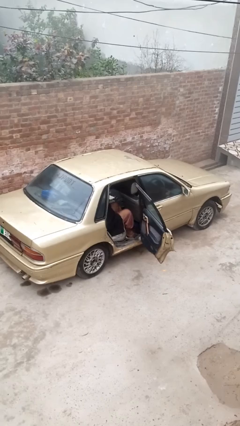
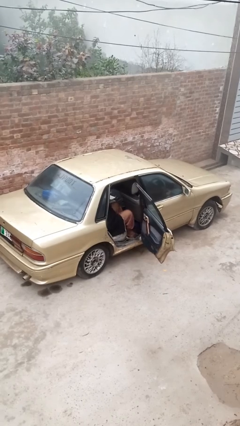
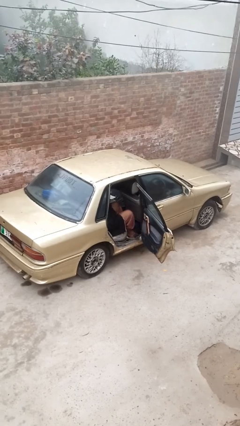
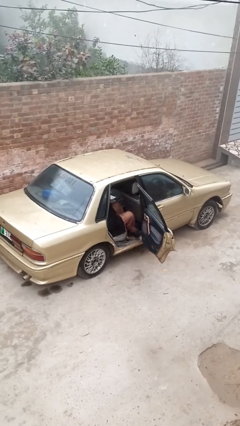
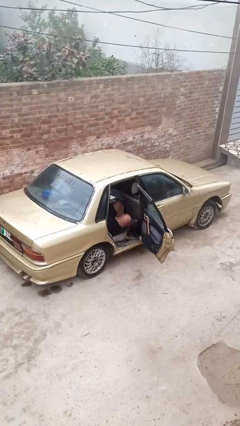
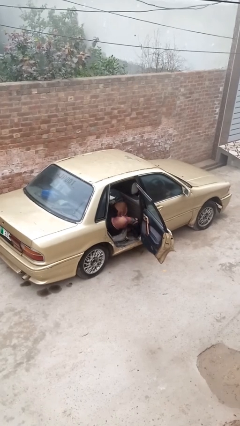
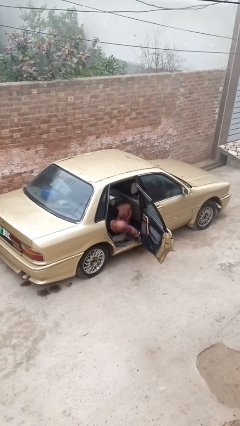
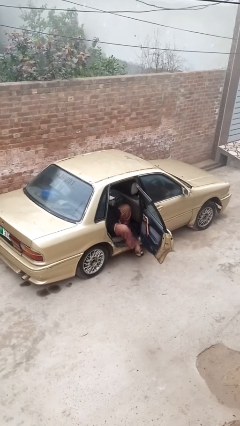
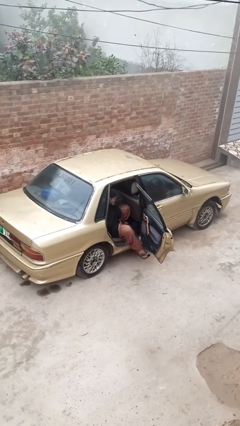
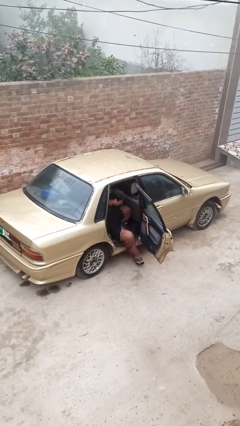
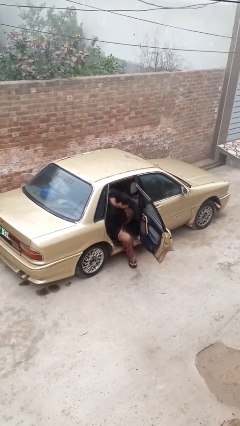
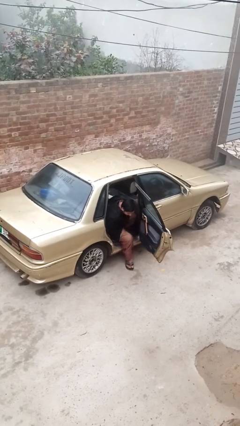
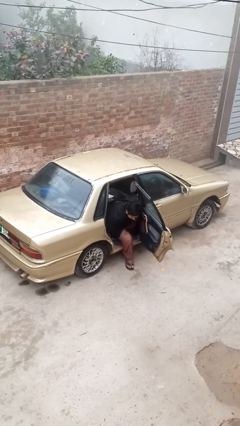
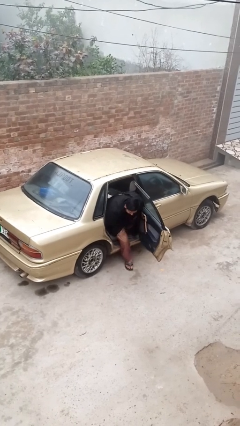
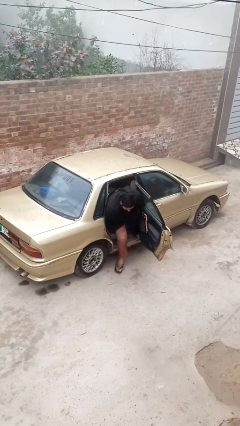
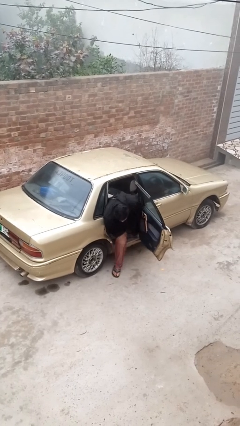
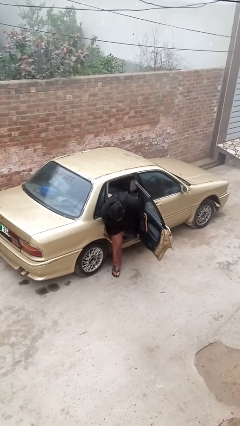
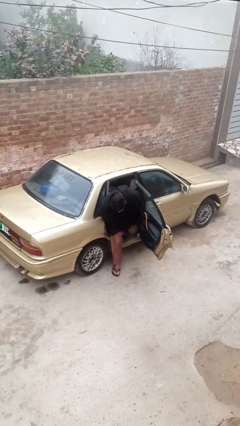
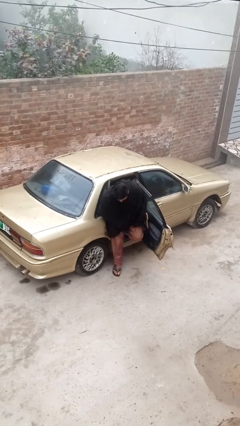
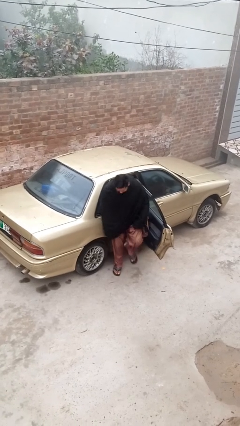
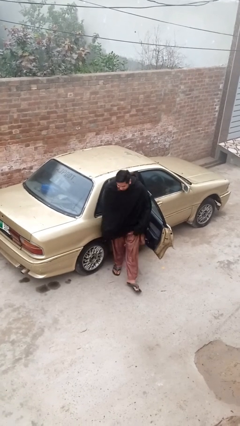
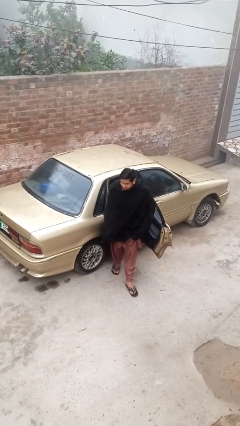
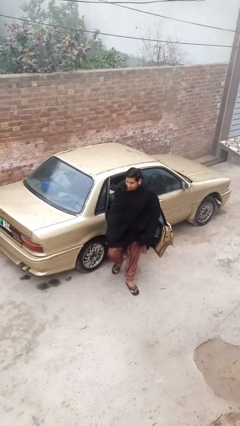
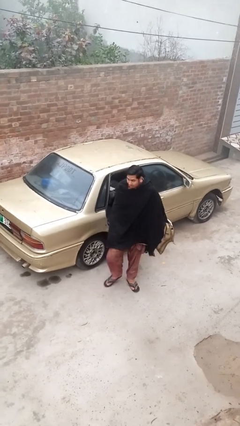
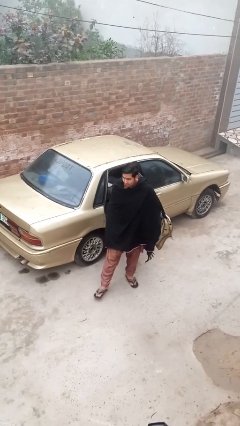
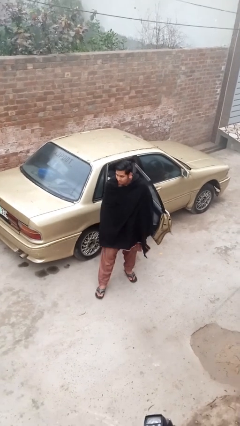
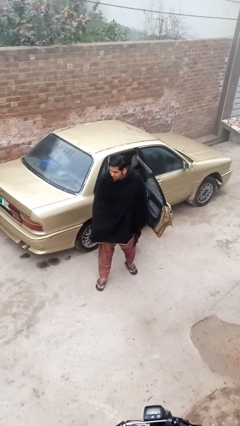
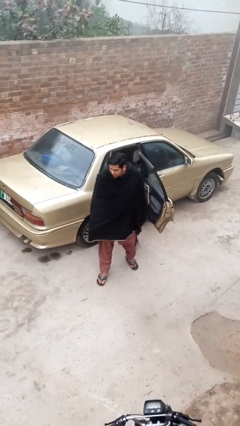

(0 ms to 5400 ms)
person exits car

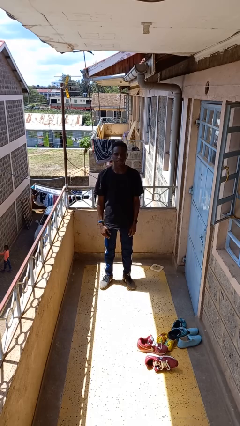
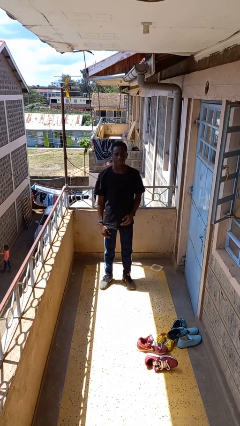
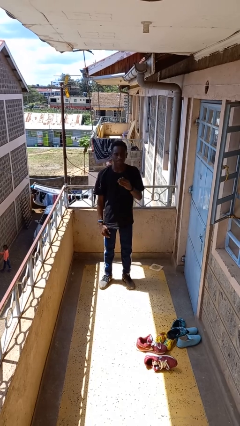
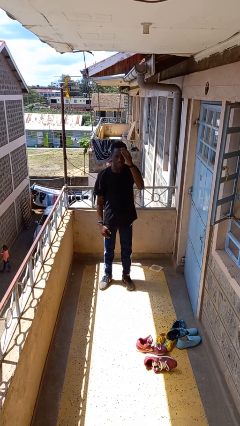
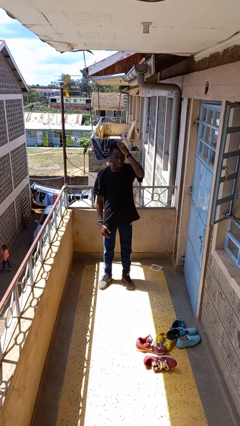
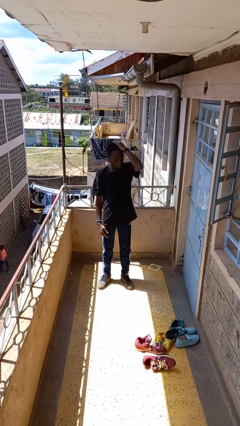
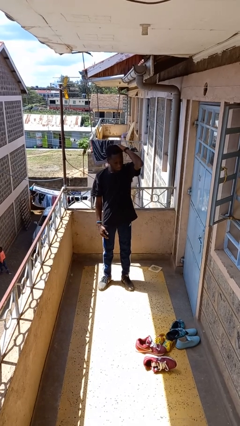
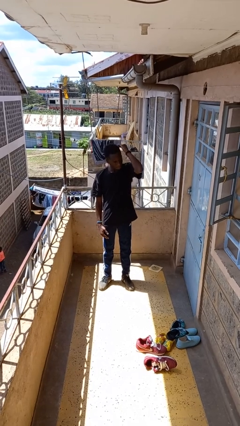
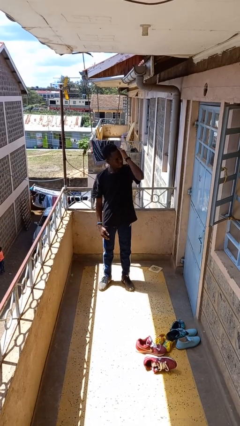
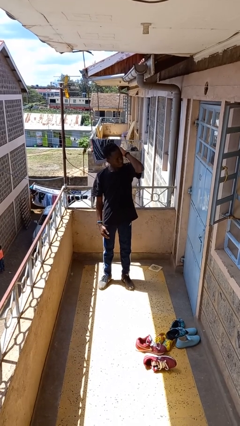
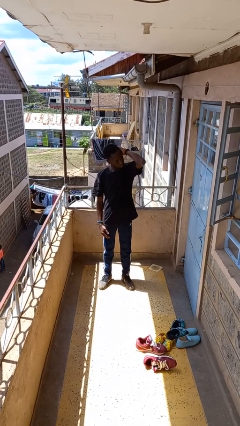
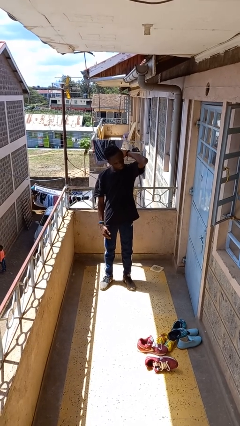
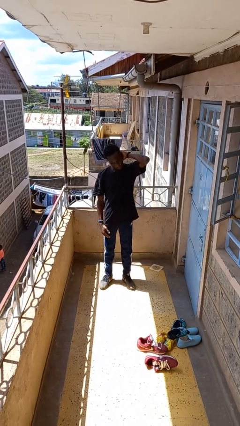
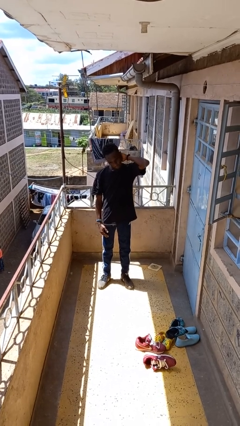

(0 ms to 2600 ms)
person strokes hair

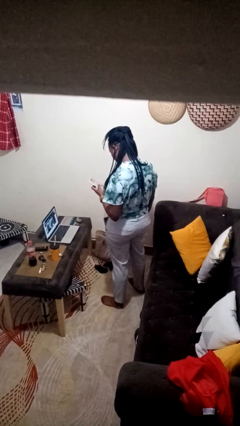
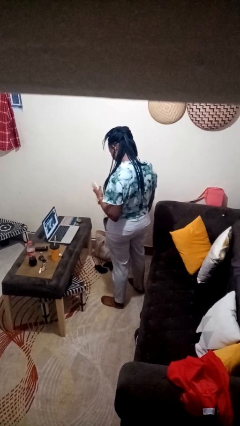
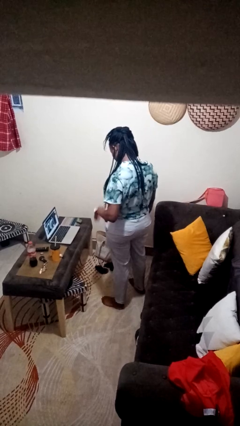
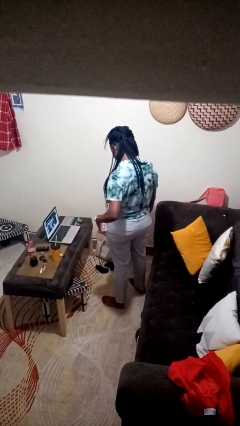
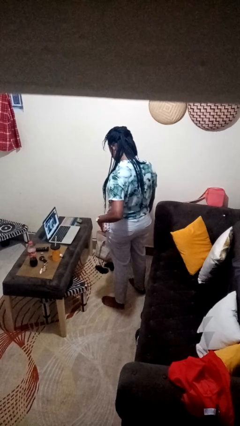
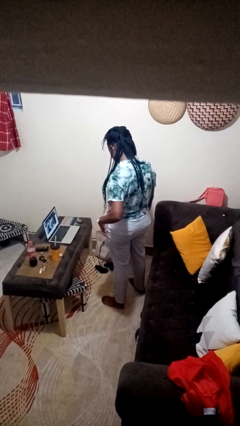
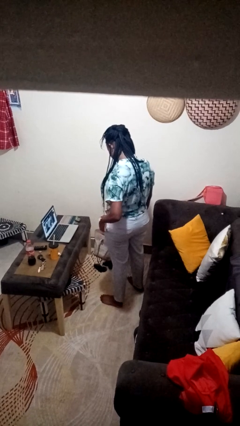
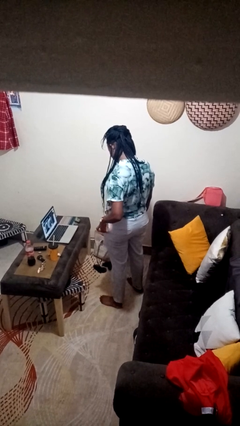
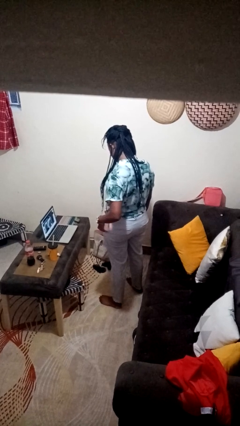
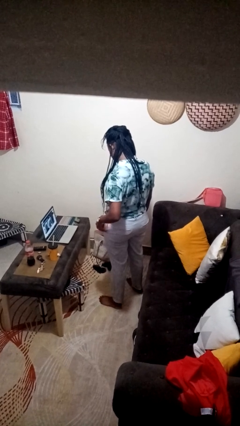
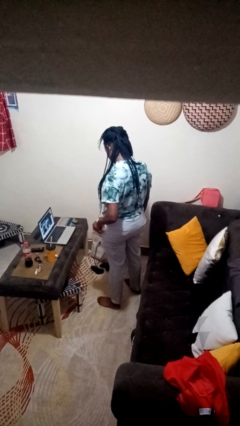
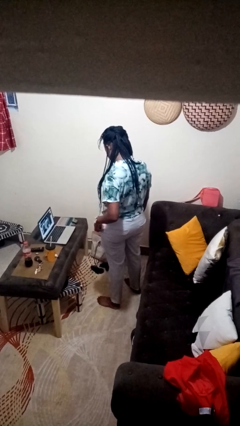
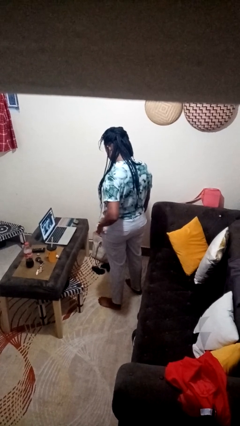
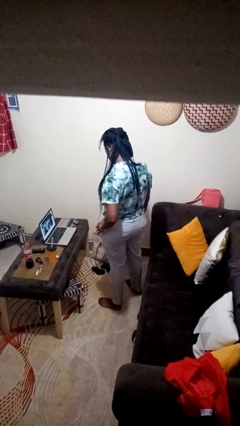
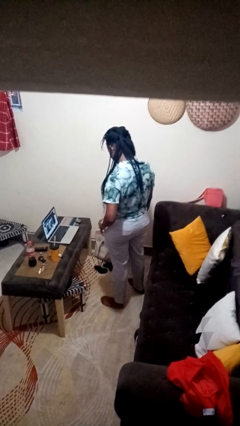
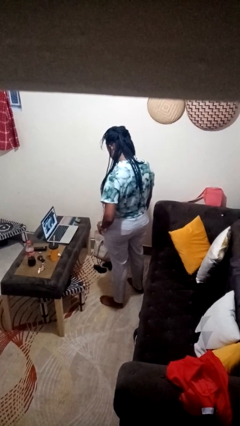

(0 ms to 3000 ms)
person puts phone into pocket

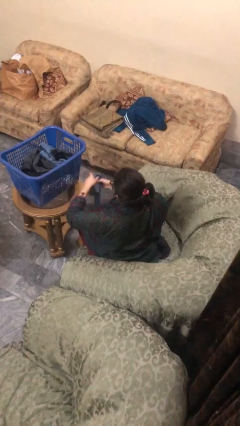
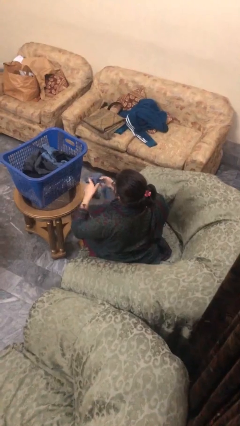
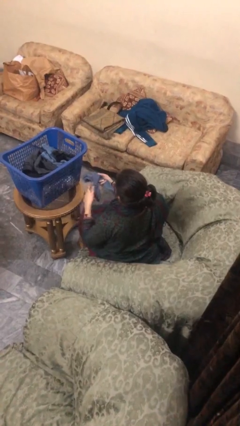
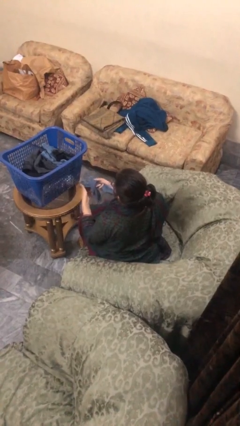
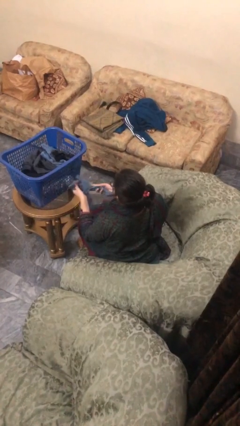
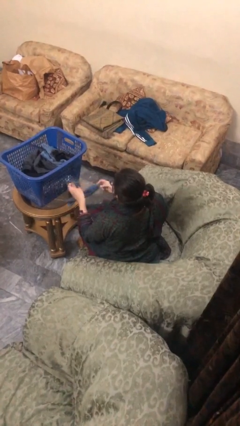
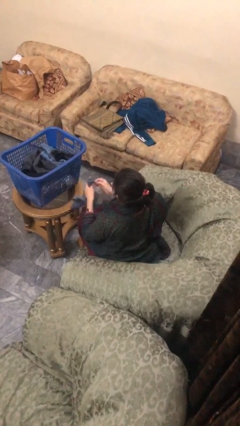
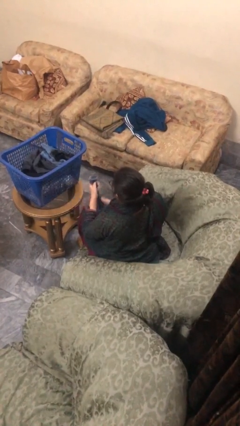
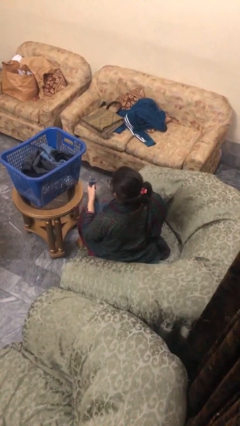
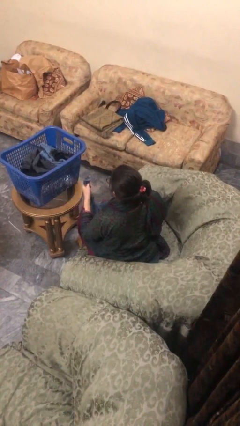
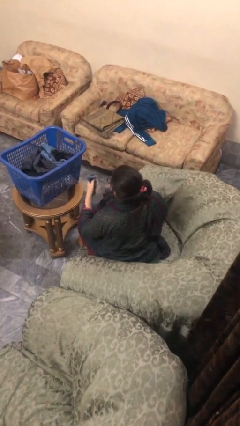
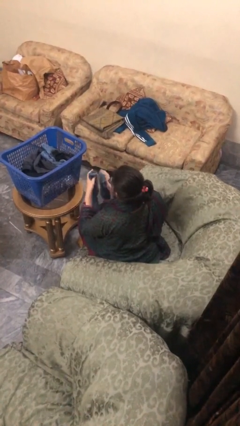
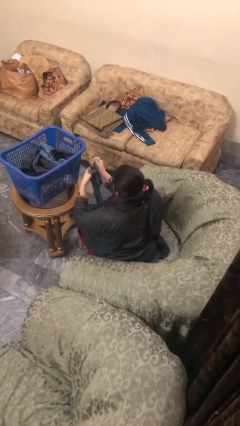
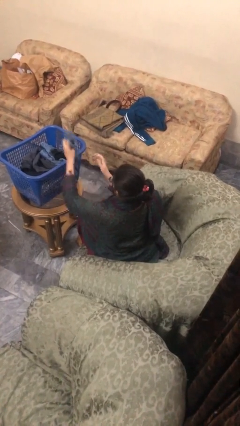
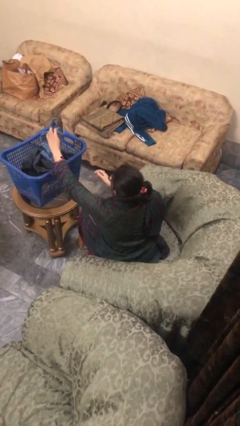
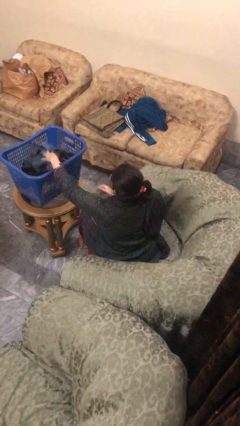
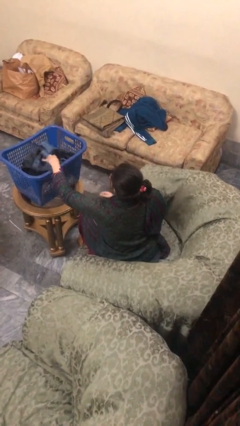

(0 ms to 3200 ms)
person folds socks

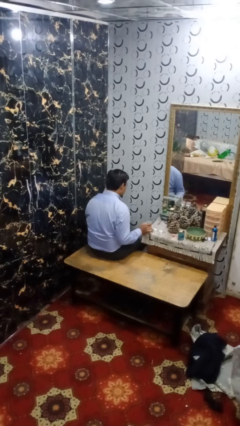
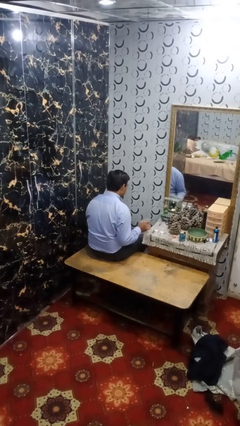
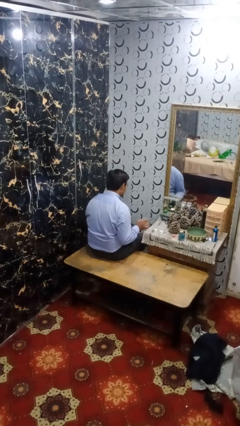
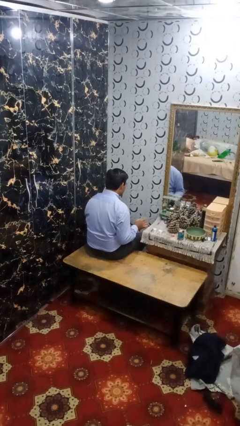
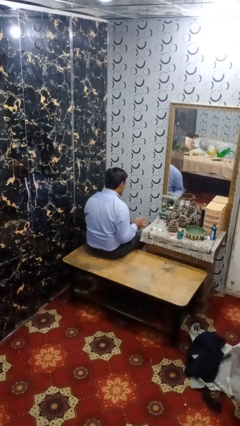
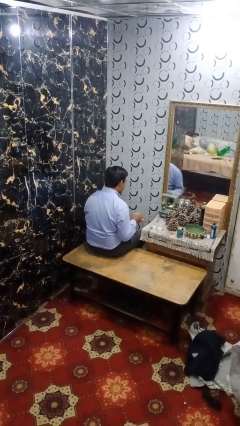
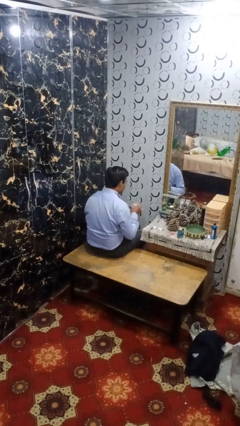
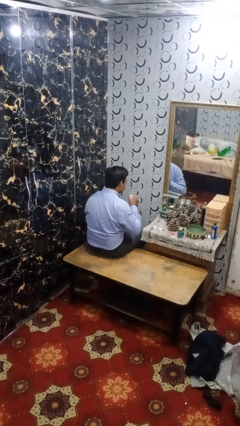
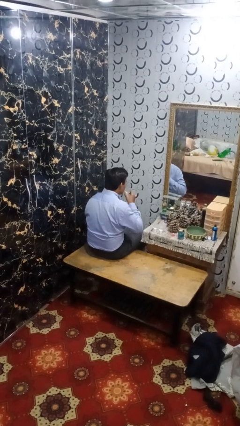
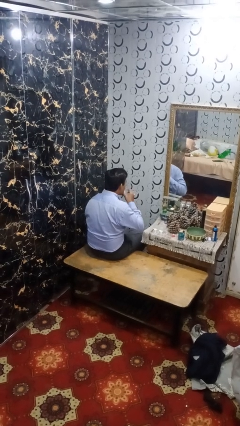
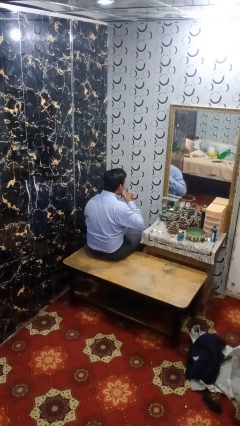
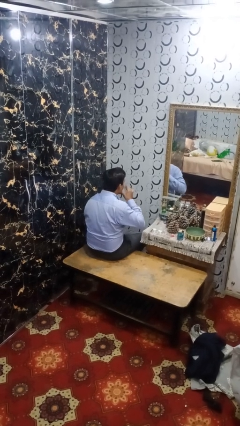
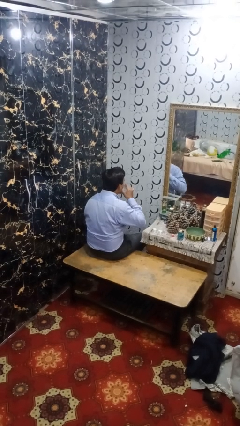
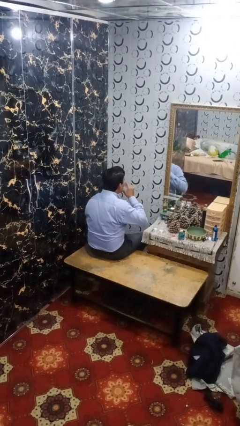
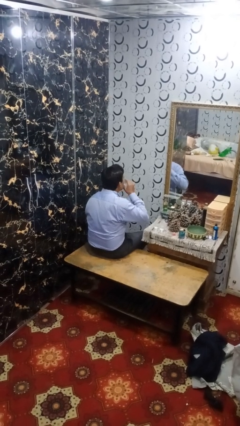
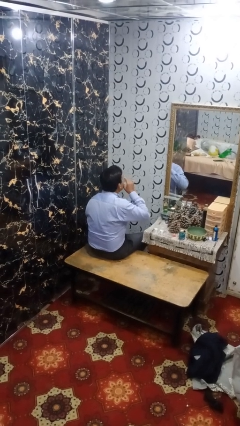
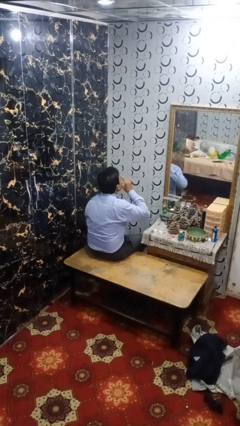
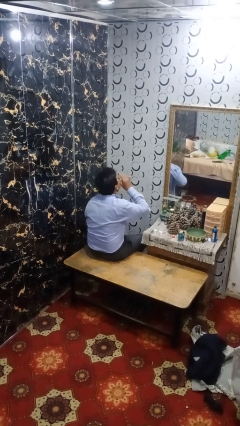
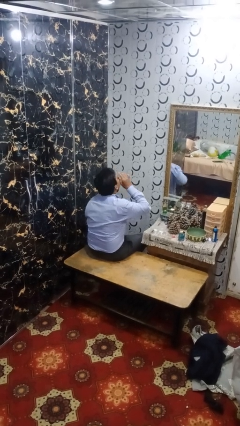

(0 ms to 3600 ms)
person drinks from shotglass
